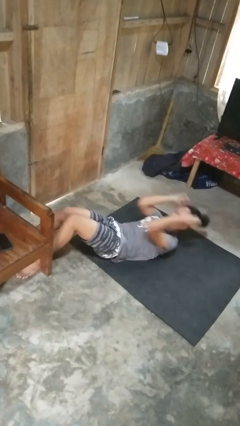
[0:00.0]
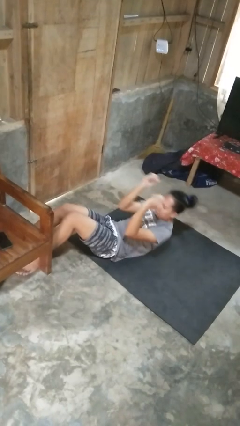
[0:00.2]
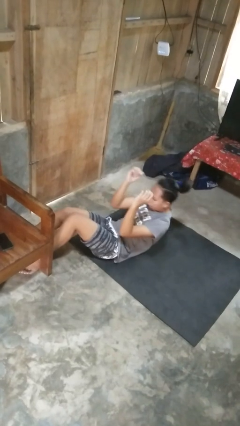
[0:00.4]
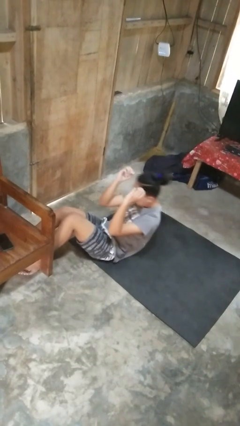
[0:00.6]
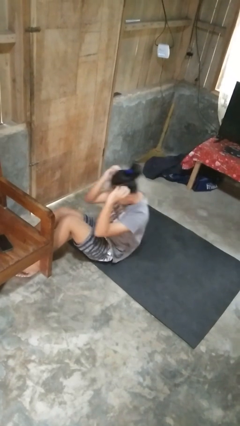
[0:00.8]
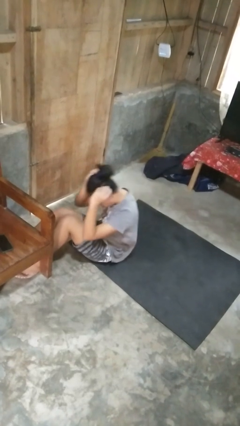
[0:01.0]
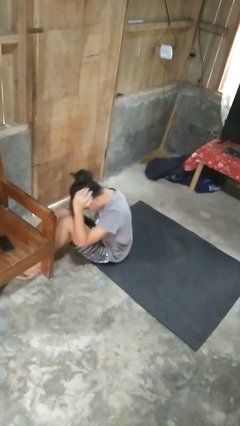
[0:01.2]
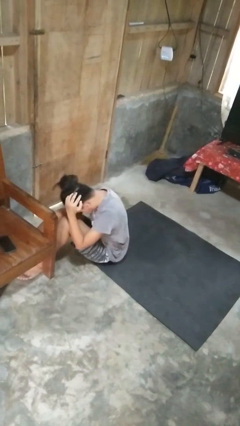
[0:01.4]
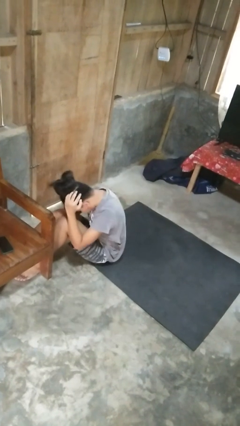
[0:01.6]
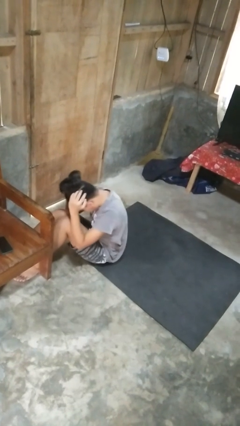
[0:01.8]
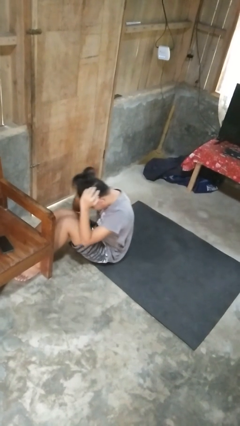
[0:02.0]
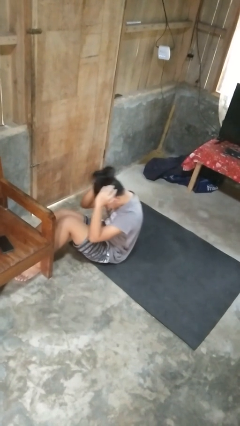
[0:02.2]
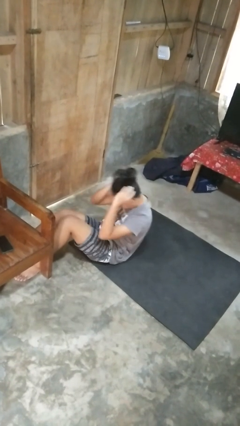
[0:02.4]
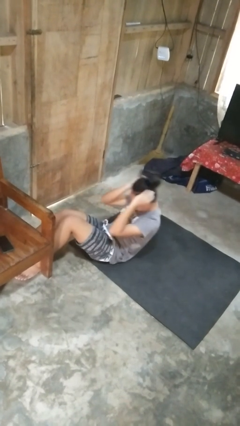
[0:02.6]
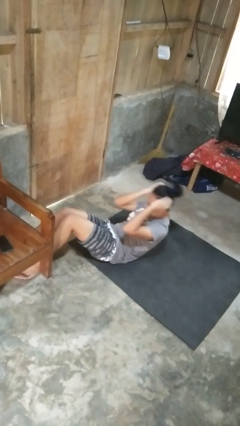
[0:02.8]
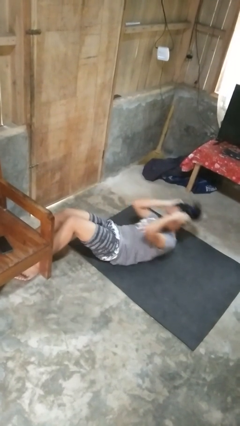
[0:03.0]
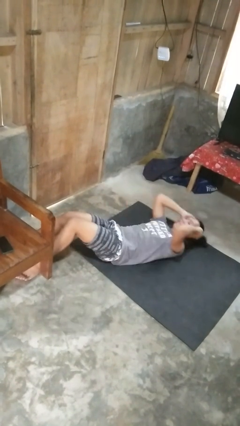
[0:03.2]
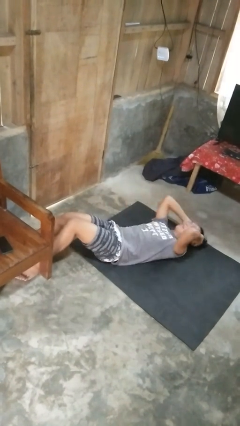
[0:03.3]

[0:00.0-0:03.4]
person exercises with situp

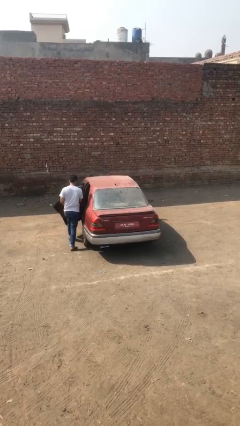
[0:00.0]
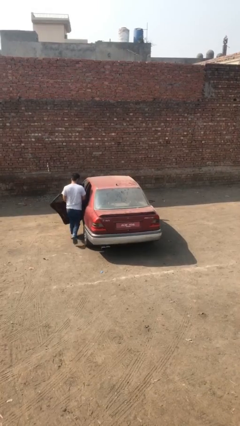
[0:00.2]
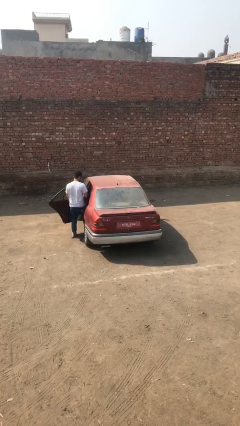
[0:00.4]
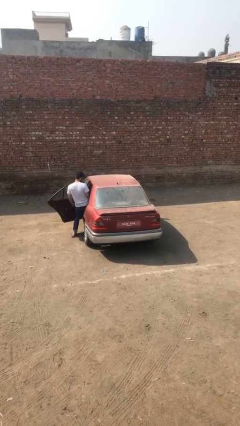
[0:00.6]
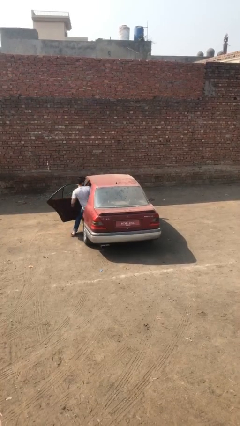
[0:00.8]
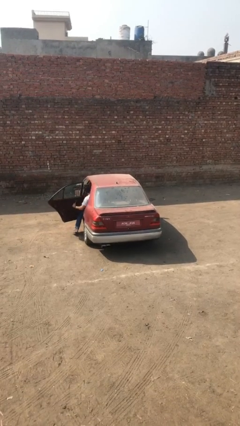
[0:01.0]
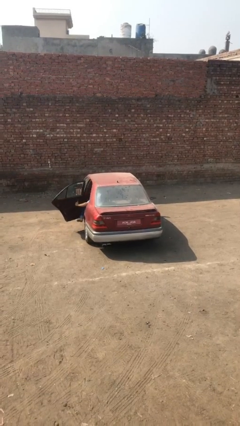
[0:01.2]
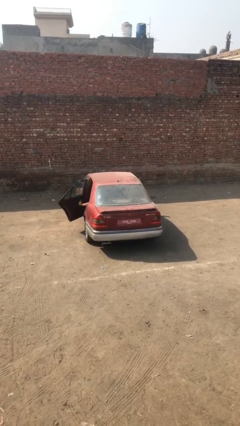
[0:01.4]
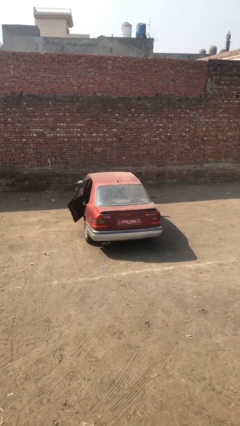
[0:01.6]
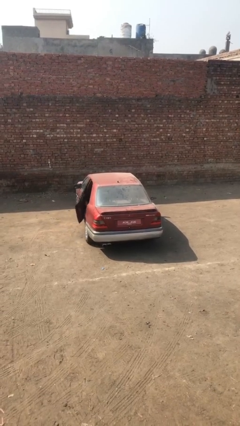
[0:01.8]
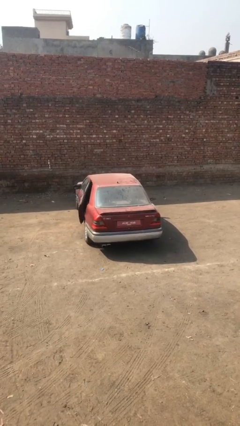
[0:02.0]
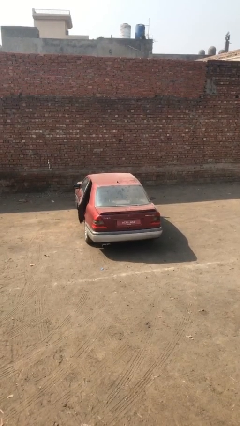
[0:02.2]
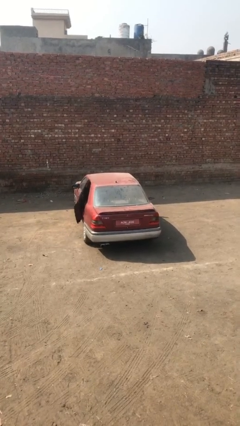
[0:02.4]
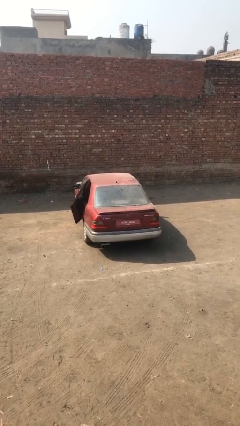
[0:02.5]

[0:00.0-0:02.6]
car picks up person

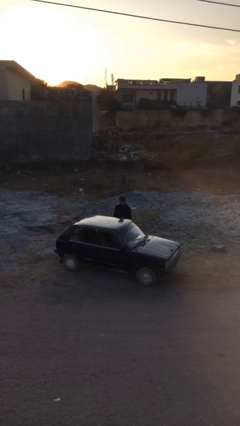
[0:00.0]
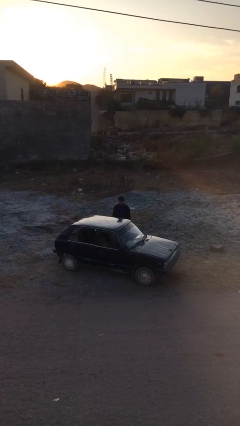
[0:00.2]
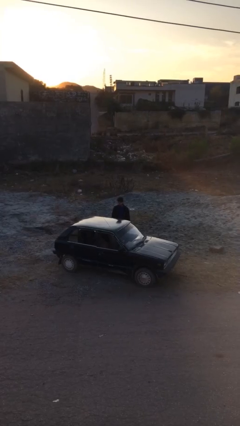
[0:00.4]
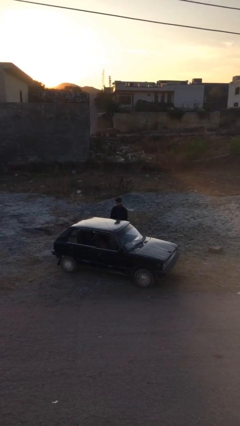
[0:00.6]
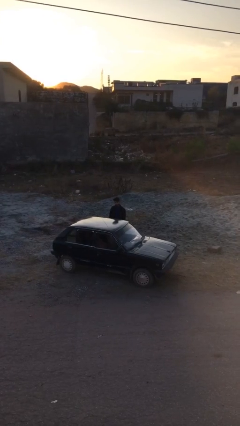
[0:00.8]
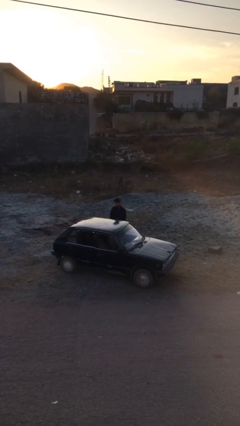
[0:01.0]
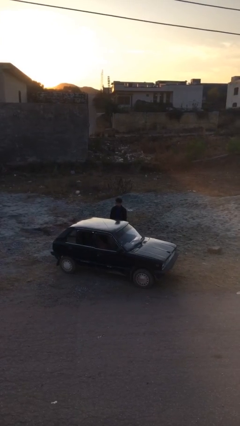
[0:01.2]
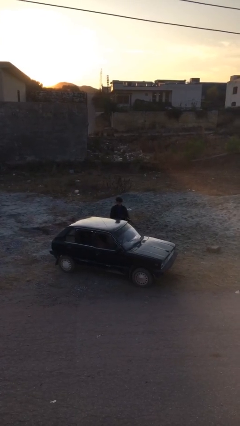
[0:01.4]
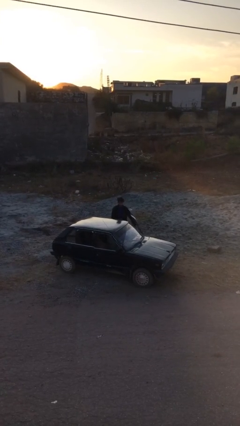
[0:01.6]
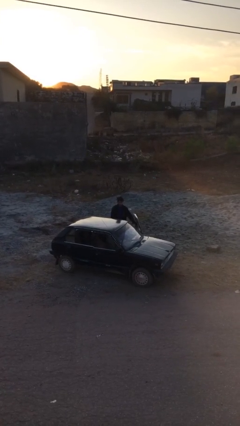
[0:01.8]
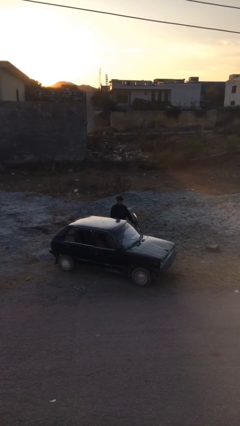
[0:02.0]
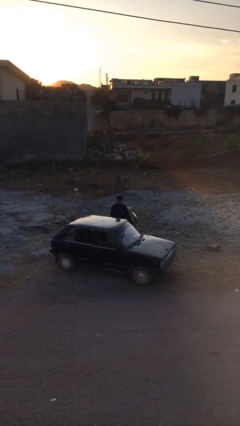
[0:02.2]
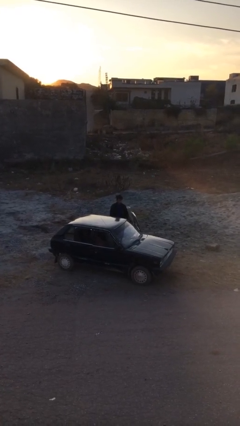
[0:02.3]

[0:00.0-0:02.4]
person opens car door

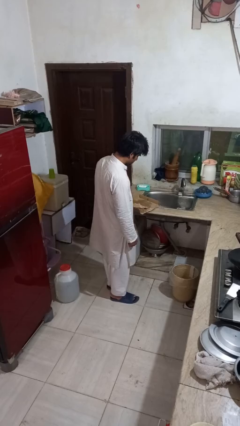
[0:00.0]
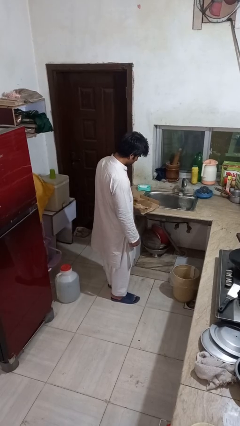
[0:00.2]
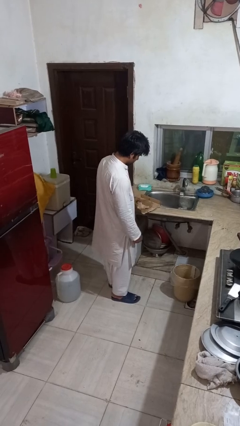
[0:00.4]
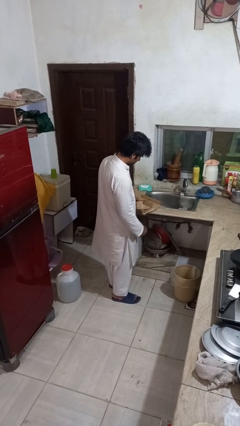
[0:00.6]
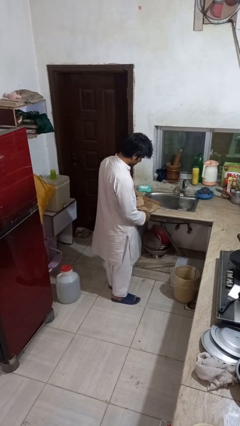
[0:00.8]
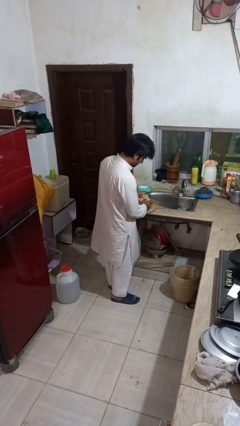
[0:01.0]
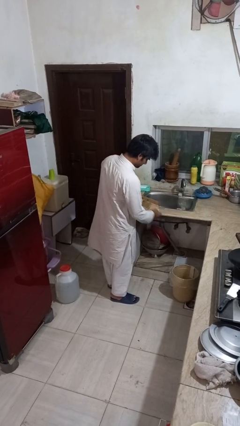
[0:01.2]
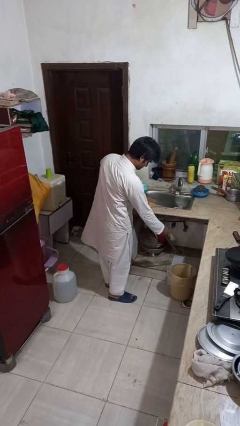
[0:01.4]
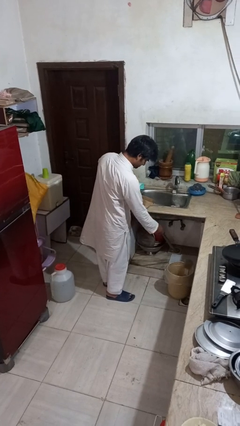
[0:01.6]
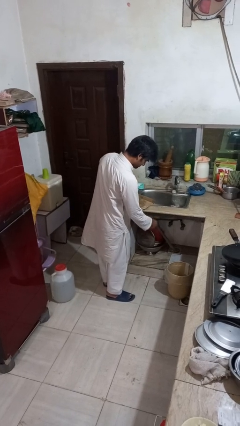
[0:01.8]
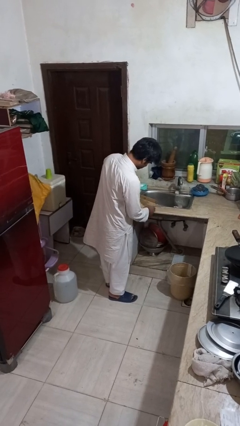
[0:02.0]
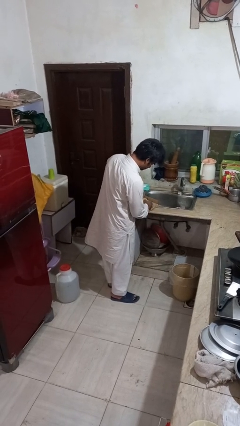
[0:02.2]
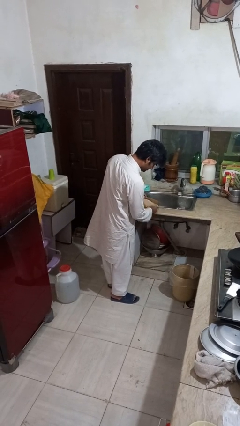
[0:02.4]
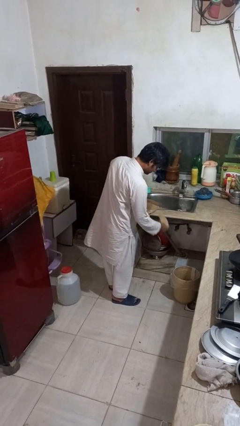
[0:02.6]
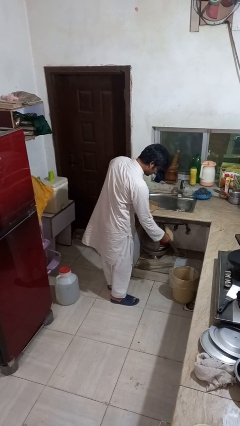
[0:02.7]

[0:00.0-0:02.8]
person discards trash

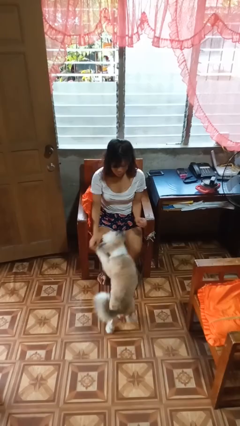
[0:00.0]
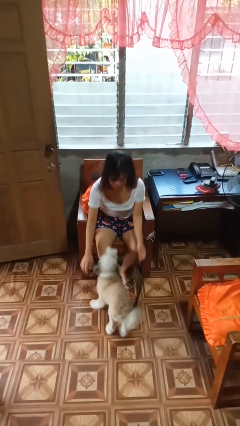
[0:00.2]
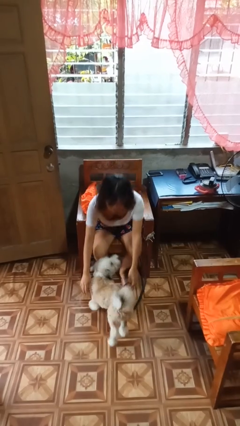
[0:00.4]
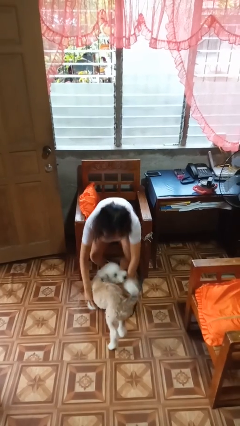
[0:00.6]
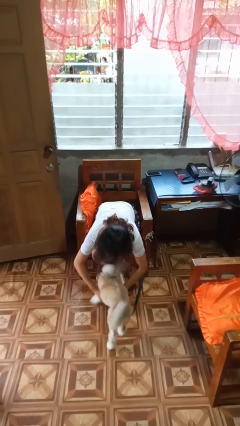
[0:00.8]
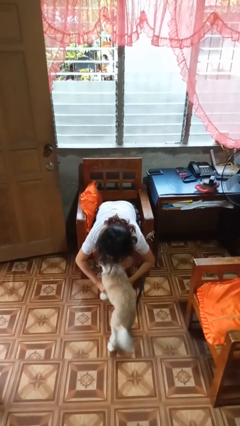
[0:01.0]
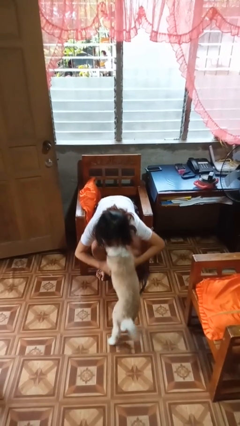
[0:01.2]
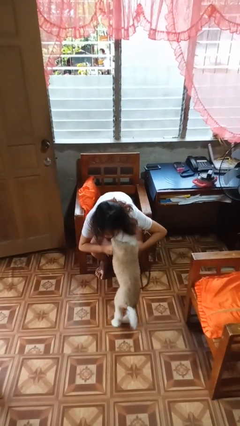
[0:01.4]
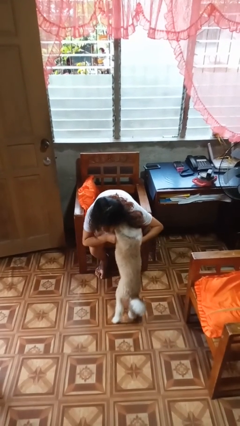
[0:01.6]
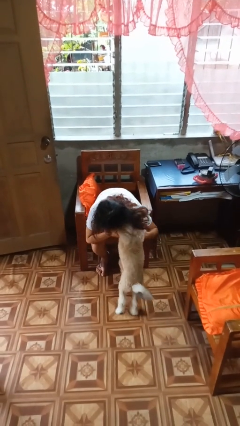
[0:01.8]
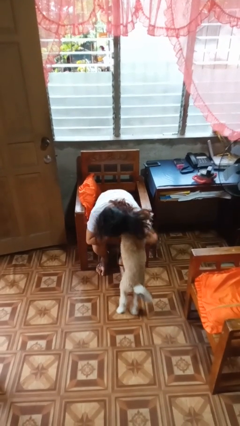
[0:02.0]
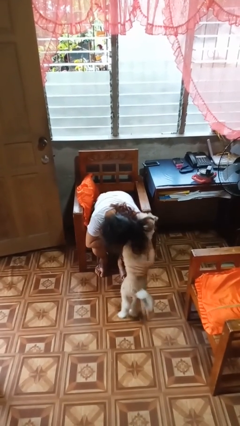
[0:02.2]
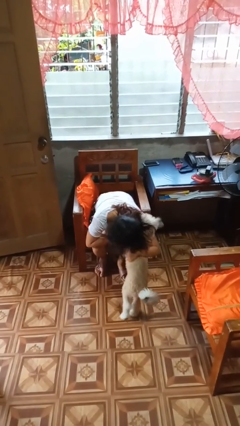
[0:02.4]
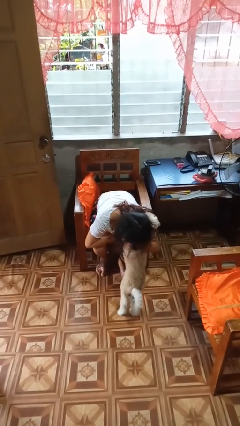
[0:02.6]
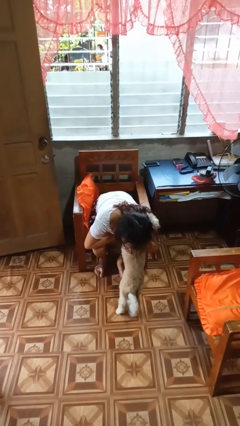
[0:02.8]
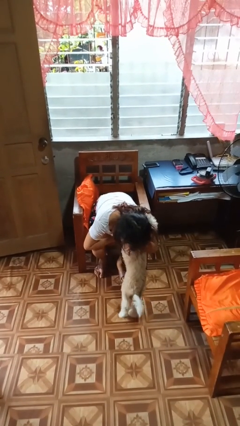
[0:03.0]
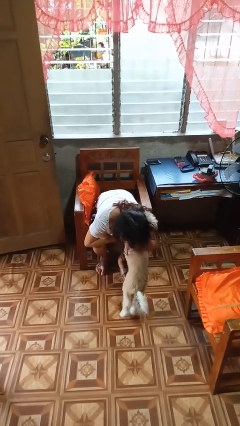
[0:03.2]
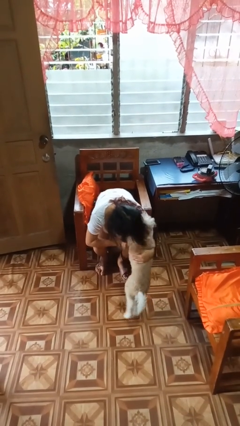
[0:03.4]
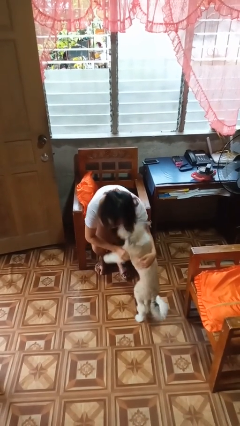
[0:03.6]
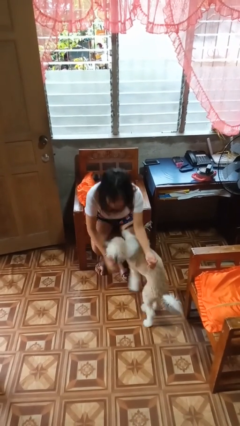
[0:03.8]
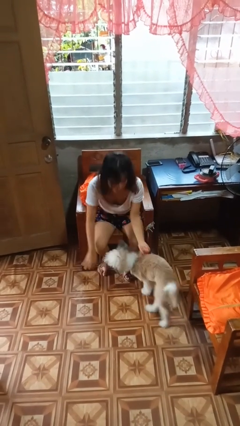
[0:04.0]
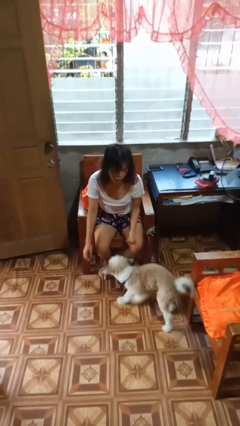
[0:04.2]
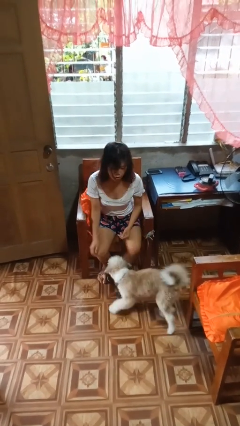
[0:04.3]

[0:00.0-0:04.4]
person hugs dog

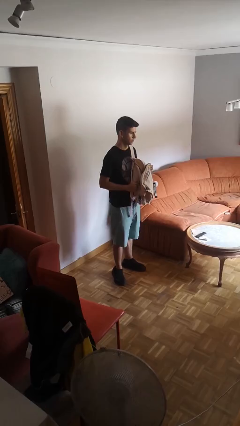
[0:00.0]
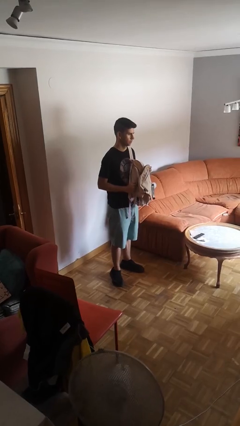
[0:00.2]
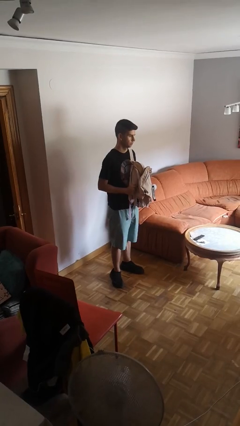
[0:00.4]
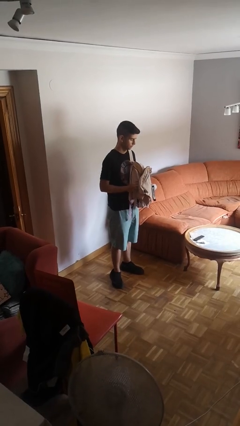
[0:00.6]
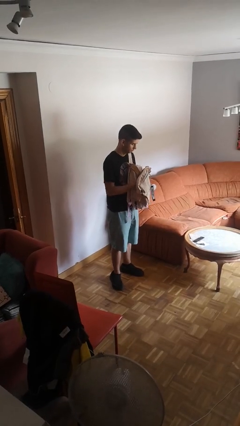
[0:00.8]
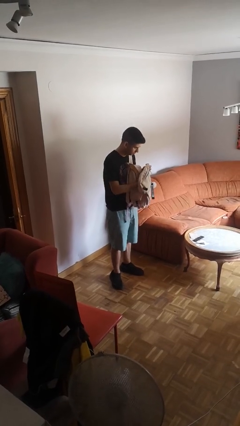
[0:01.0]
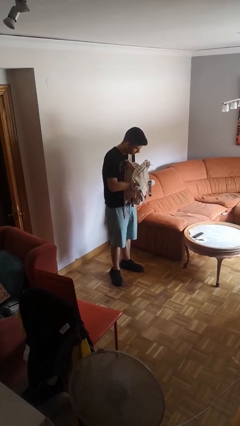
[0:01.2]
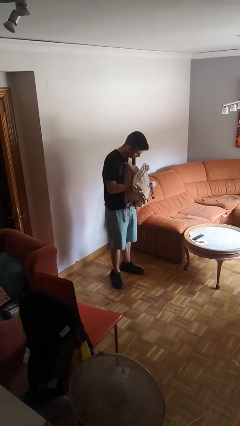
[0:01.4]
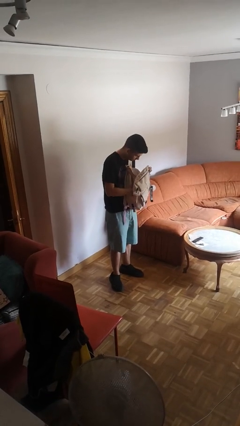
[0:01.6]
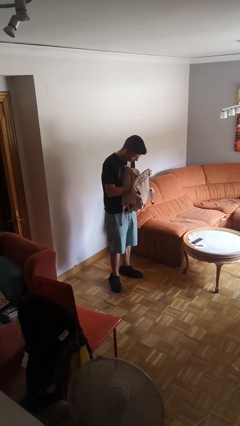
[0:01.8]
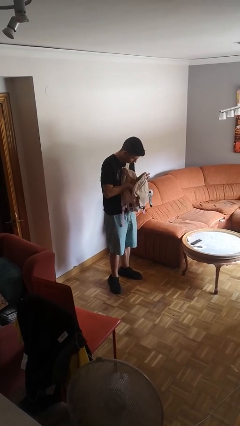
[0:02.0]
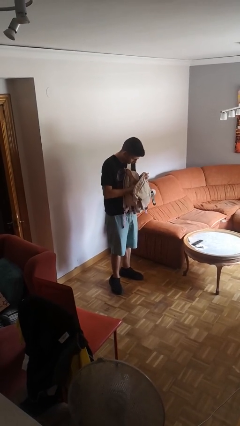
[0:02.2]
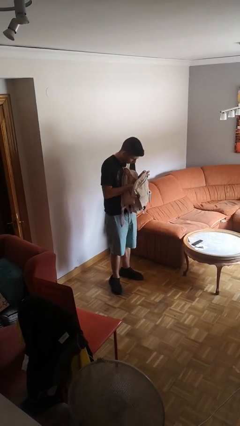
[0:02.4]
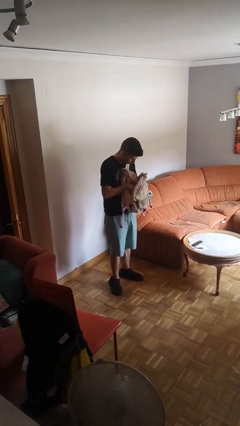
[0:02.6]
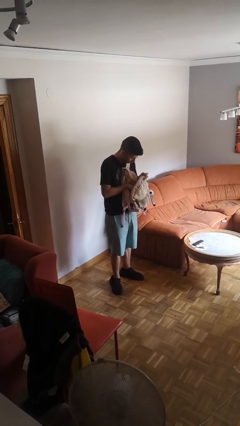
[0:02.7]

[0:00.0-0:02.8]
person searches in backpack
